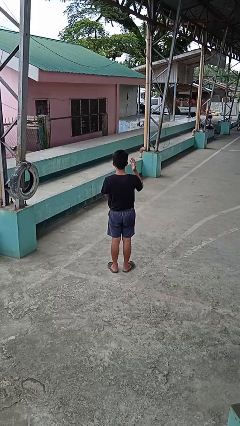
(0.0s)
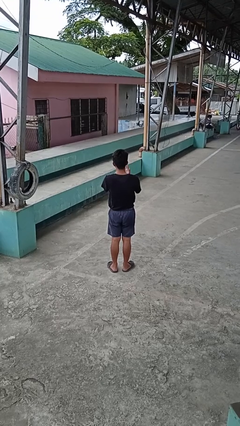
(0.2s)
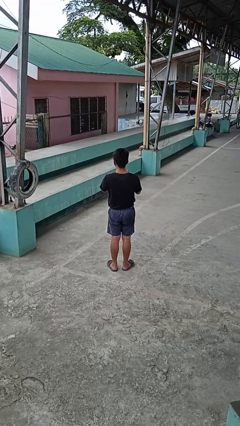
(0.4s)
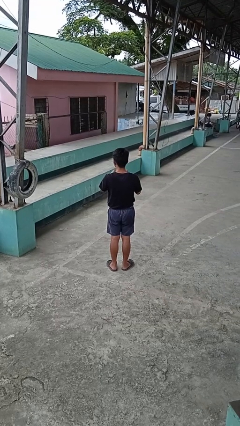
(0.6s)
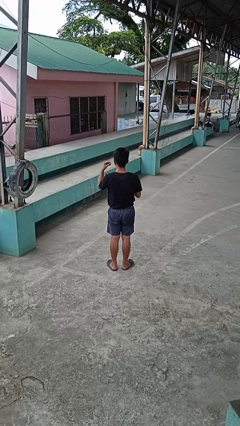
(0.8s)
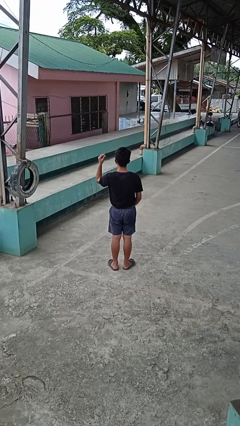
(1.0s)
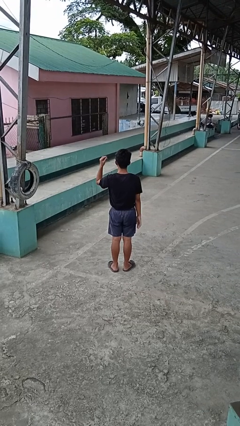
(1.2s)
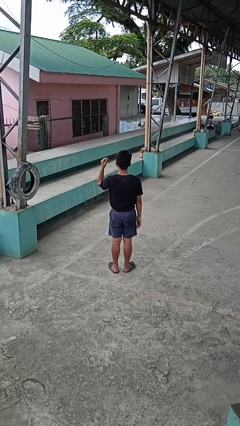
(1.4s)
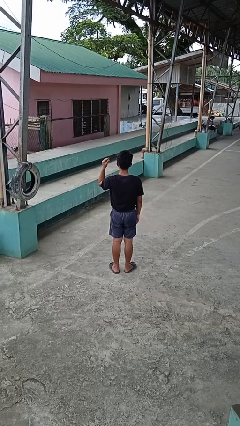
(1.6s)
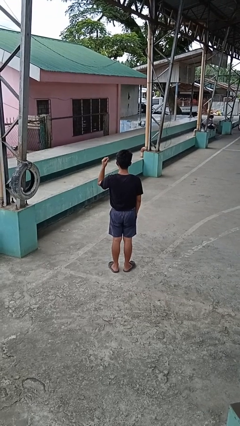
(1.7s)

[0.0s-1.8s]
person takes off ring

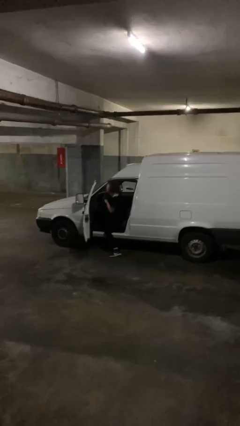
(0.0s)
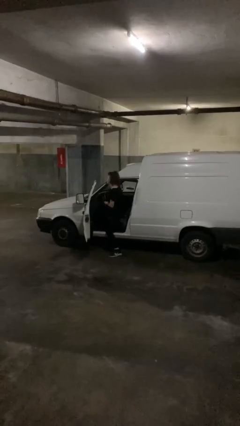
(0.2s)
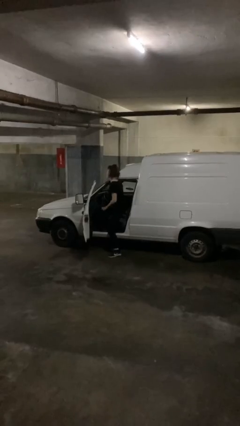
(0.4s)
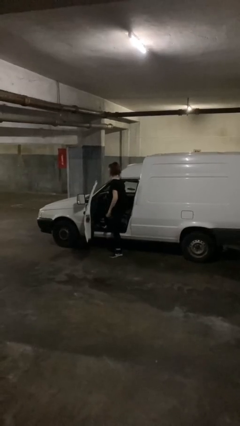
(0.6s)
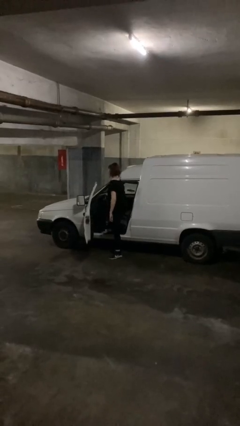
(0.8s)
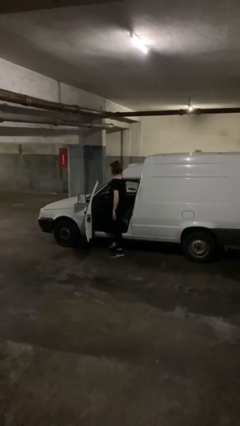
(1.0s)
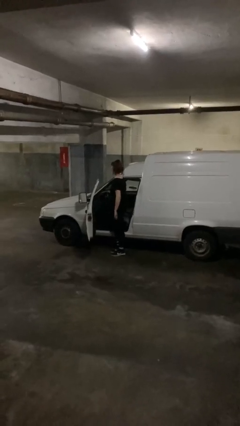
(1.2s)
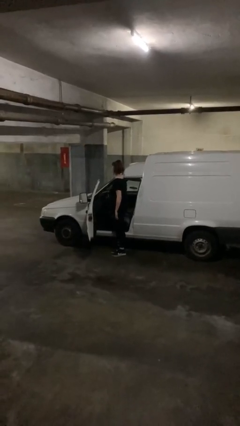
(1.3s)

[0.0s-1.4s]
person exits car

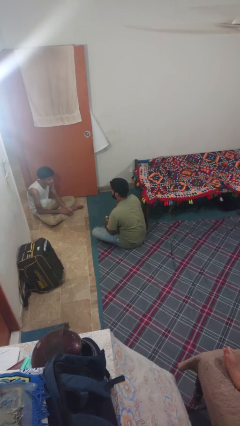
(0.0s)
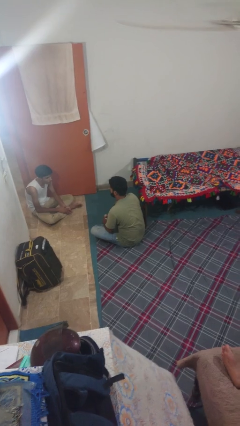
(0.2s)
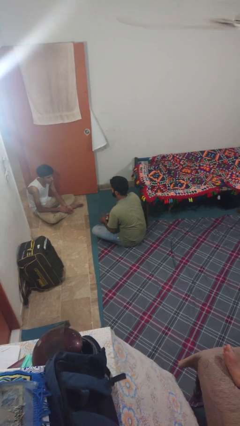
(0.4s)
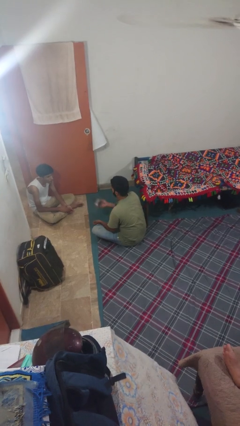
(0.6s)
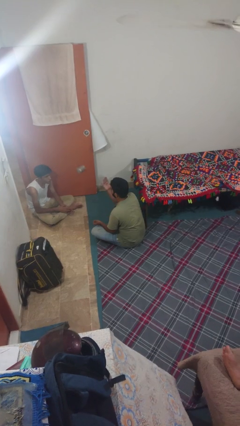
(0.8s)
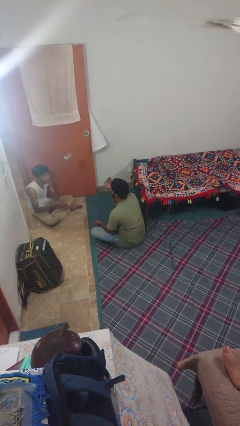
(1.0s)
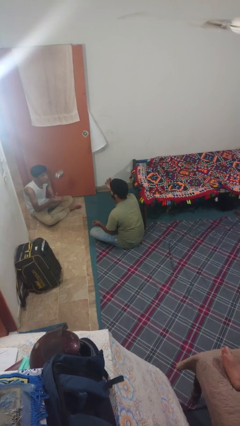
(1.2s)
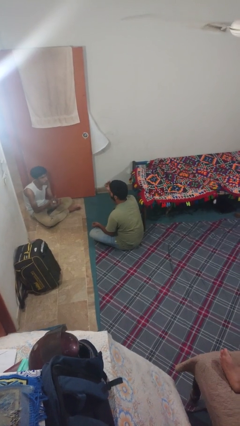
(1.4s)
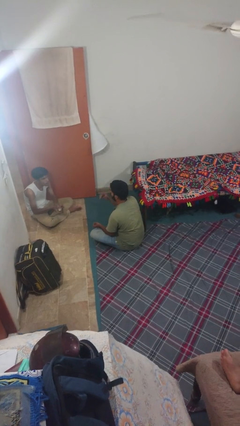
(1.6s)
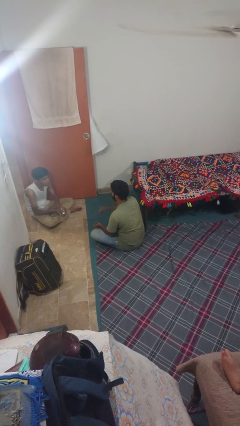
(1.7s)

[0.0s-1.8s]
person throws object to person

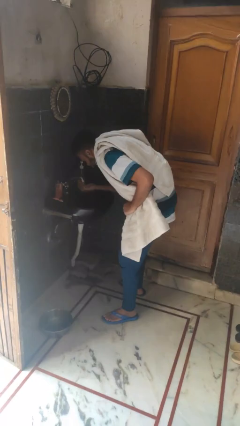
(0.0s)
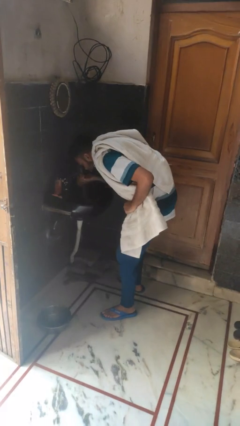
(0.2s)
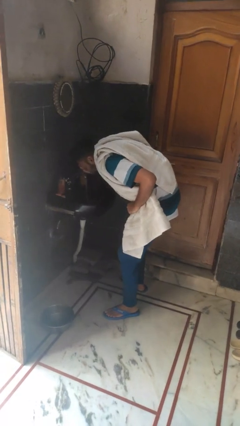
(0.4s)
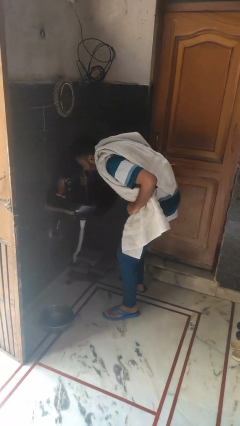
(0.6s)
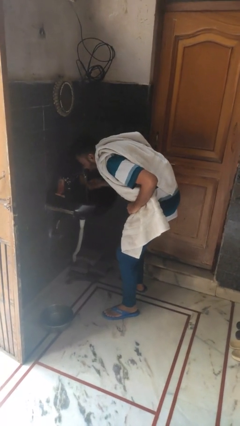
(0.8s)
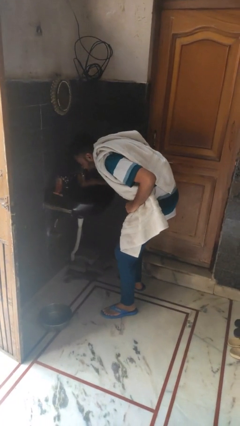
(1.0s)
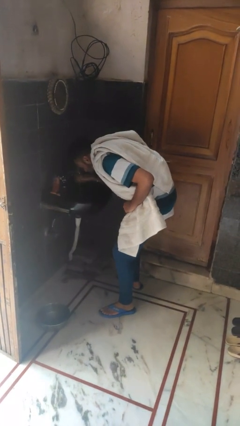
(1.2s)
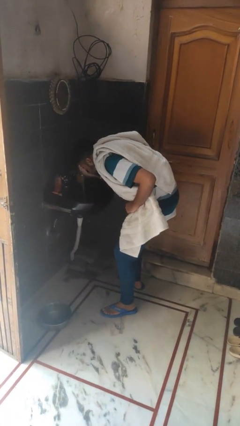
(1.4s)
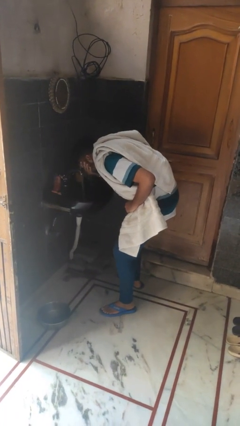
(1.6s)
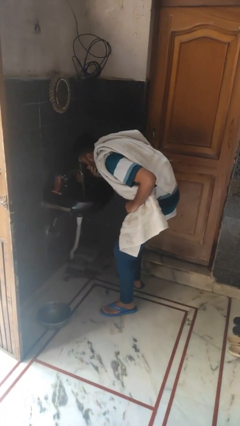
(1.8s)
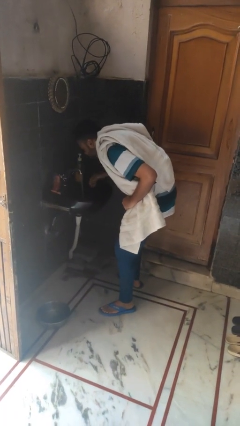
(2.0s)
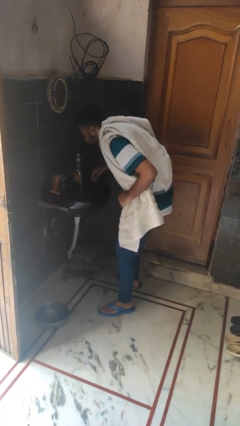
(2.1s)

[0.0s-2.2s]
person washes face

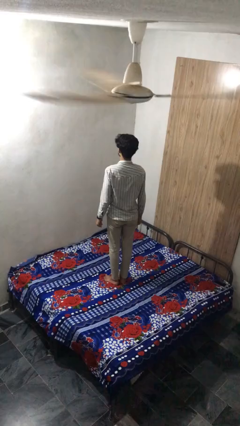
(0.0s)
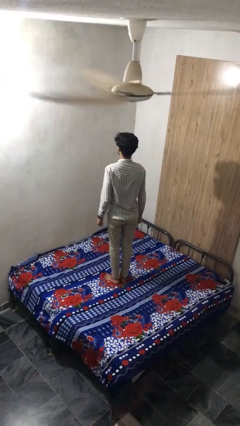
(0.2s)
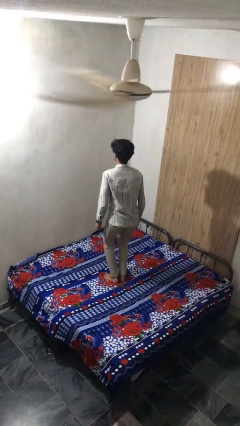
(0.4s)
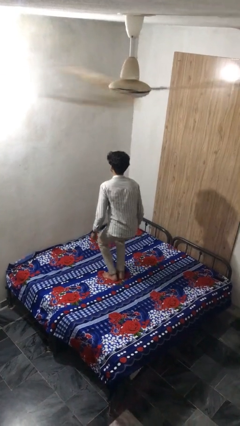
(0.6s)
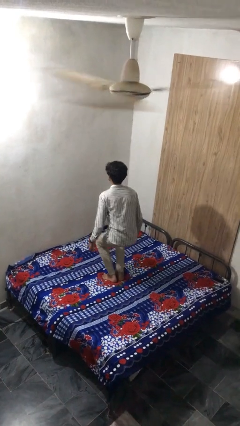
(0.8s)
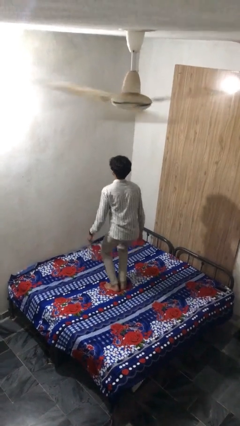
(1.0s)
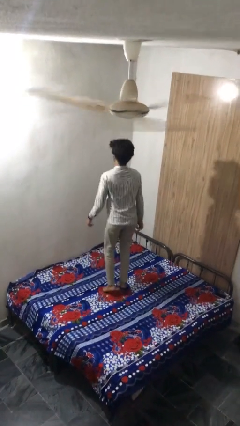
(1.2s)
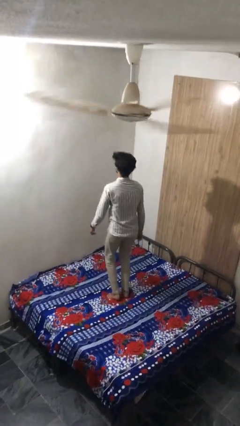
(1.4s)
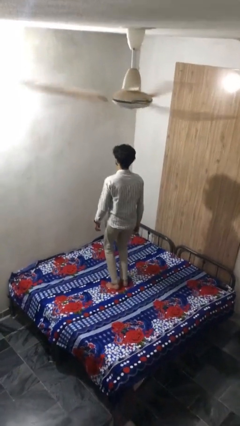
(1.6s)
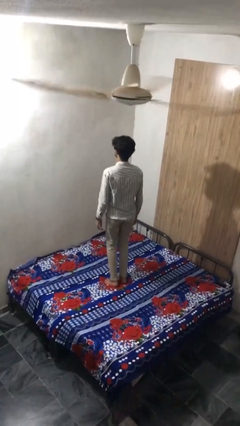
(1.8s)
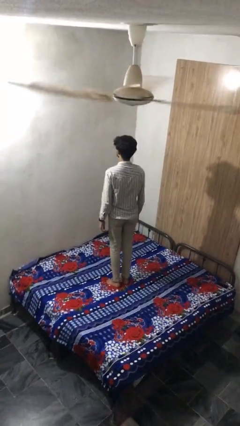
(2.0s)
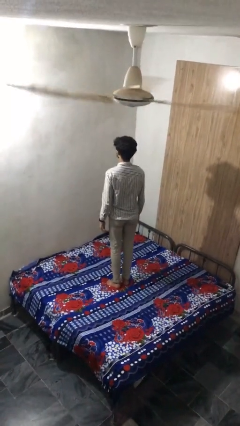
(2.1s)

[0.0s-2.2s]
person jumps on bed

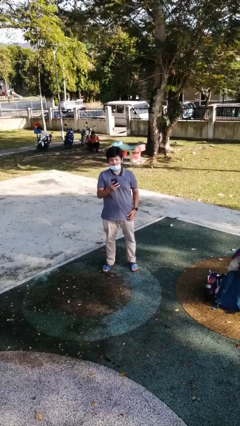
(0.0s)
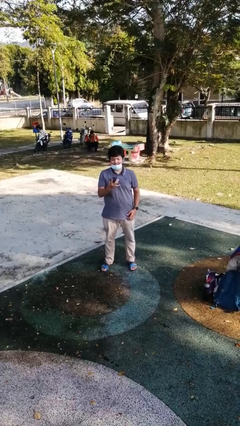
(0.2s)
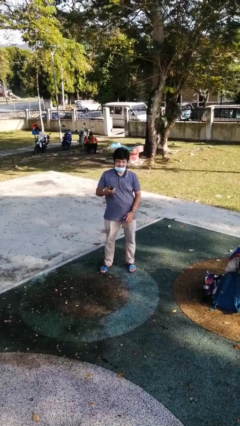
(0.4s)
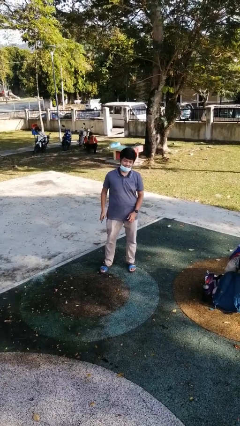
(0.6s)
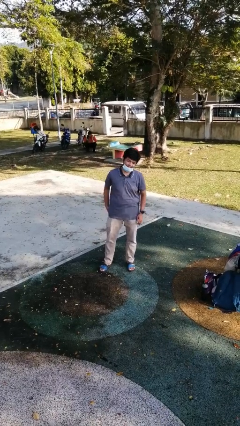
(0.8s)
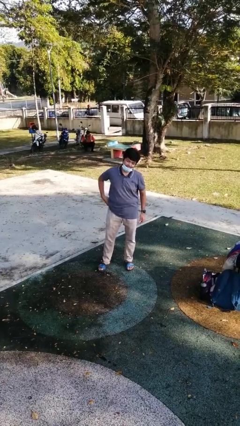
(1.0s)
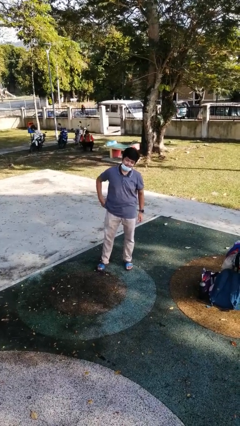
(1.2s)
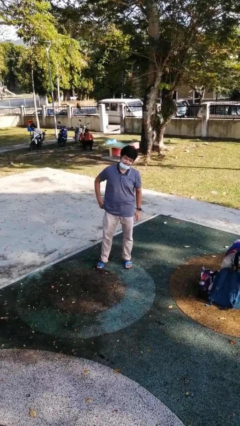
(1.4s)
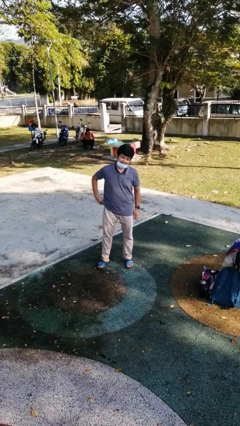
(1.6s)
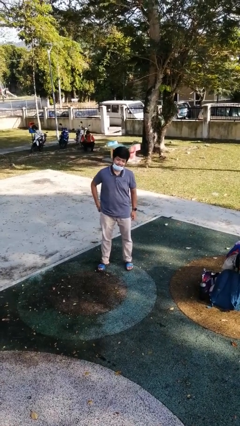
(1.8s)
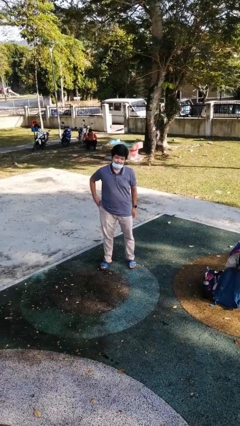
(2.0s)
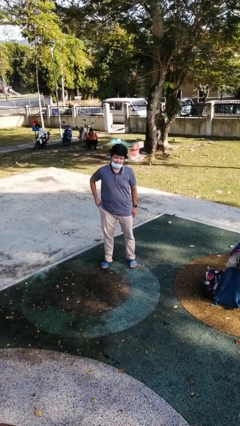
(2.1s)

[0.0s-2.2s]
person puts phone into pocket

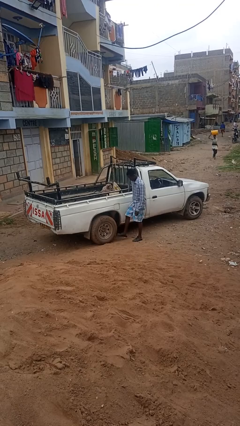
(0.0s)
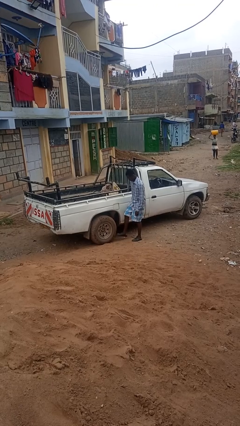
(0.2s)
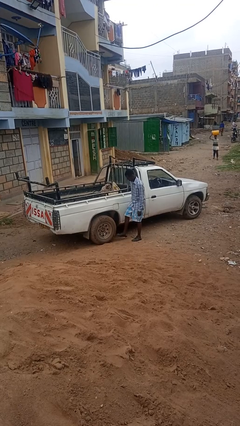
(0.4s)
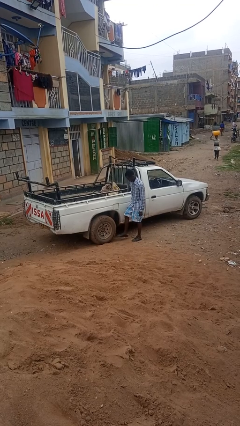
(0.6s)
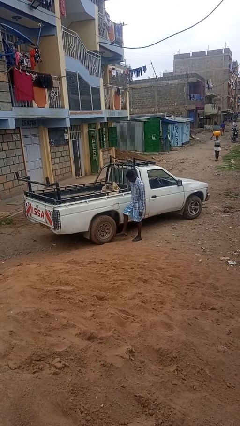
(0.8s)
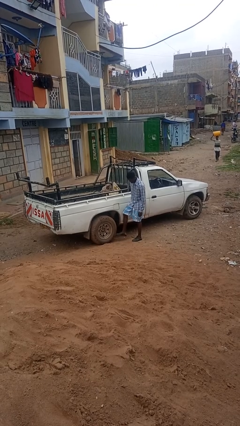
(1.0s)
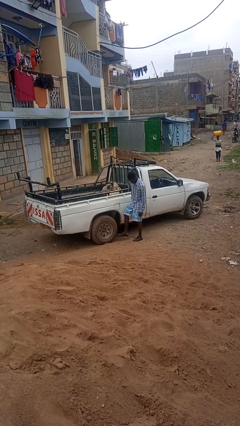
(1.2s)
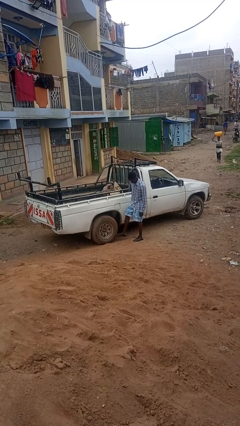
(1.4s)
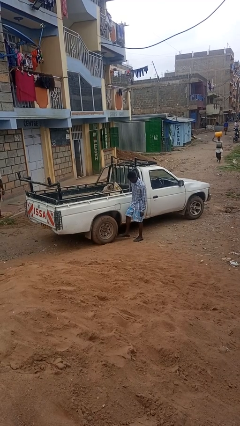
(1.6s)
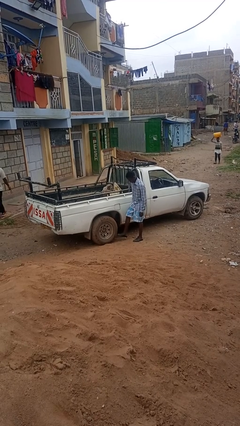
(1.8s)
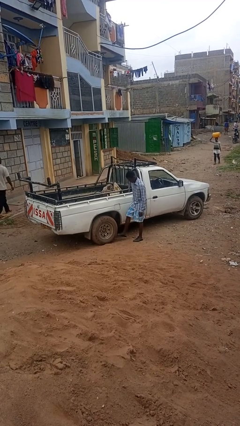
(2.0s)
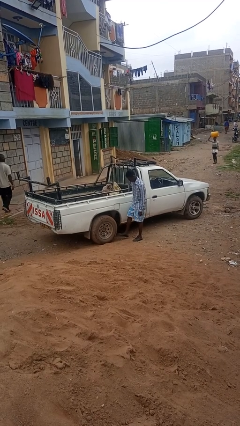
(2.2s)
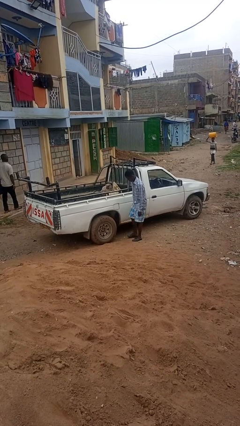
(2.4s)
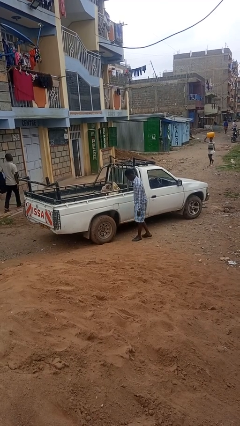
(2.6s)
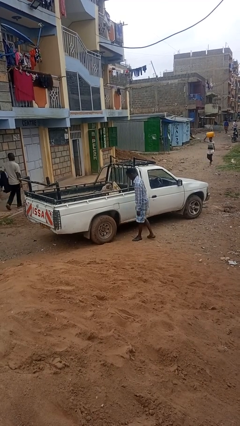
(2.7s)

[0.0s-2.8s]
person kicks car tires

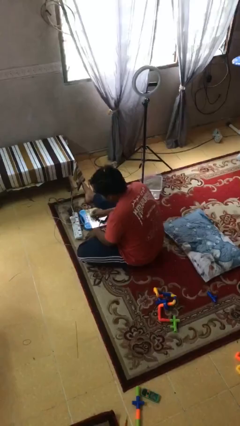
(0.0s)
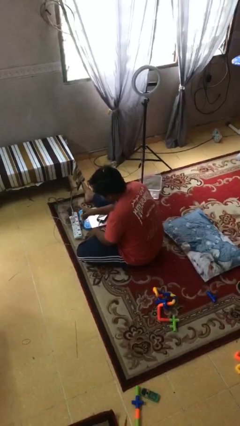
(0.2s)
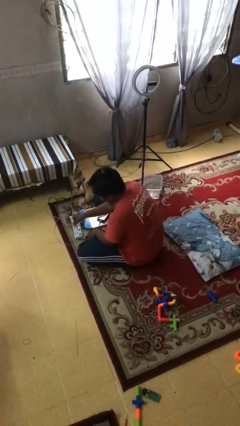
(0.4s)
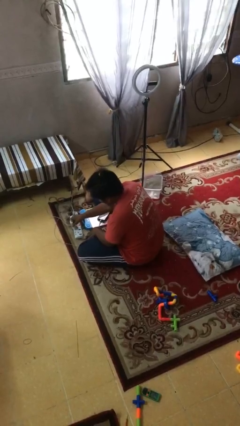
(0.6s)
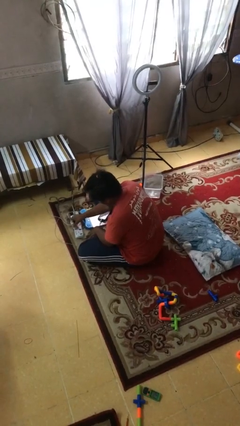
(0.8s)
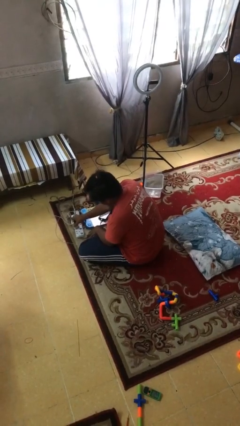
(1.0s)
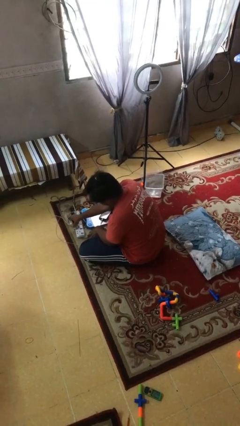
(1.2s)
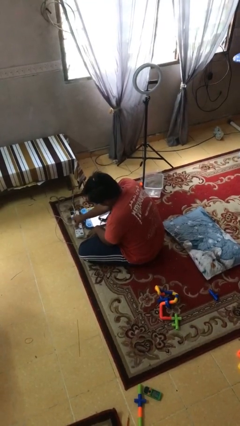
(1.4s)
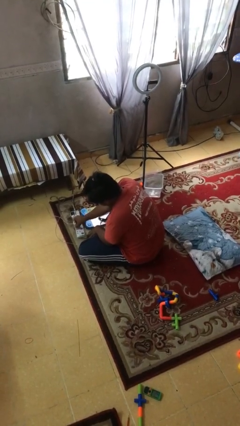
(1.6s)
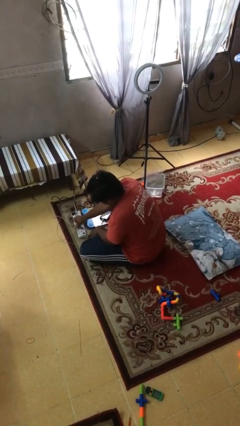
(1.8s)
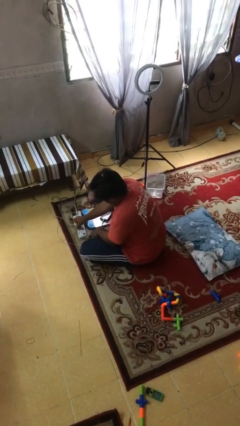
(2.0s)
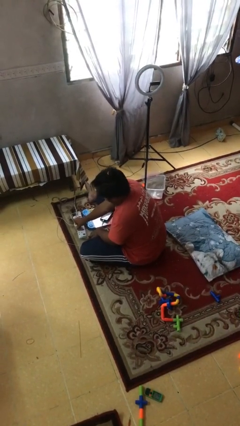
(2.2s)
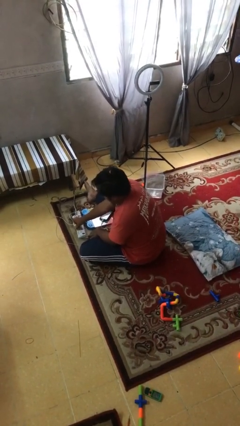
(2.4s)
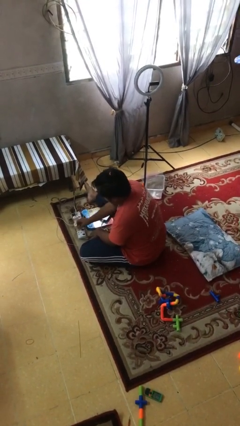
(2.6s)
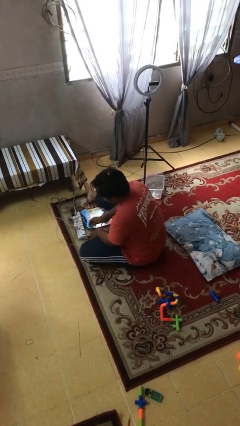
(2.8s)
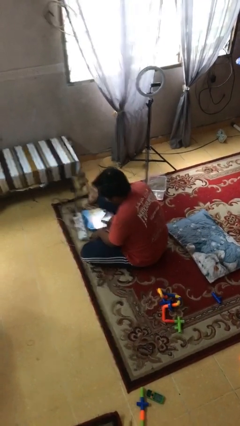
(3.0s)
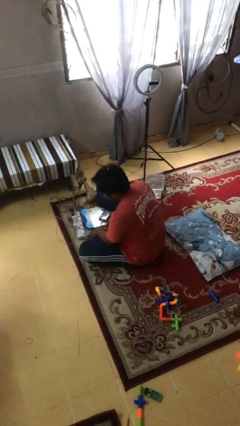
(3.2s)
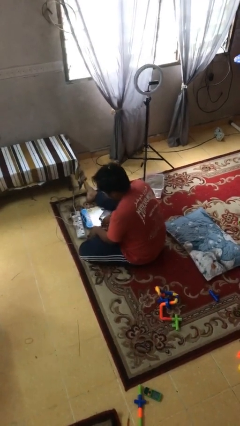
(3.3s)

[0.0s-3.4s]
person plugs into electrical socket
